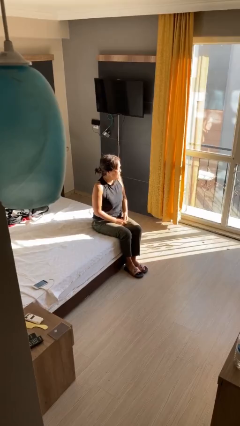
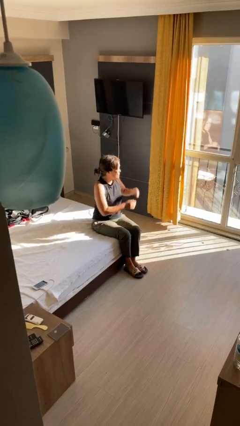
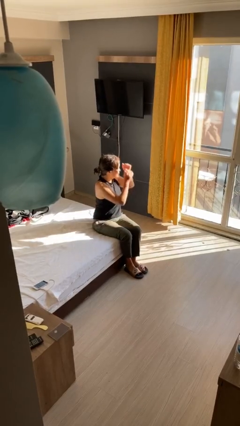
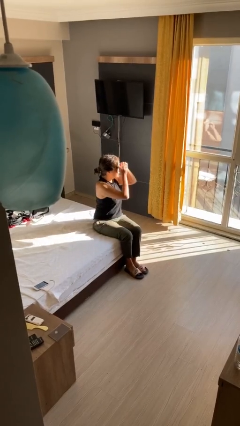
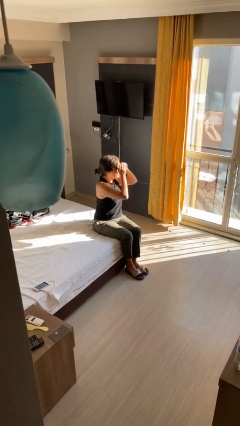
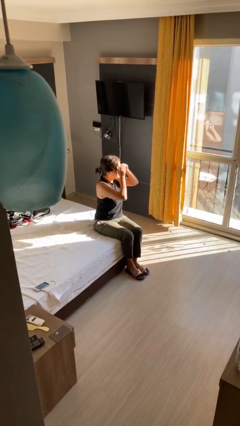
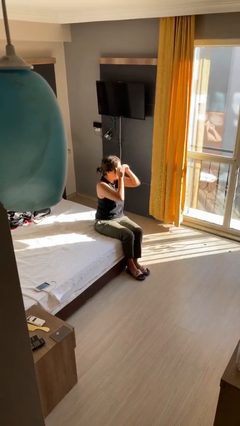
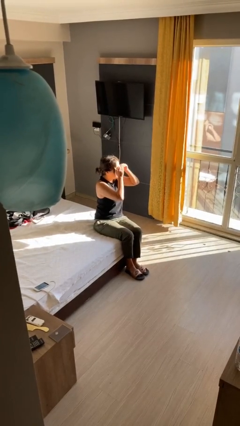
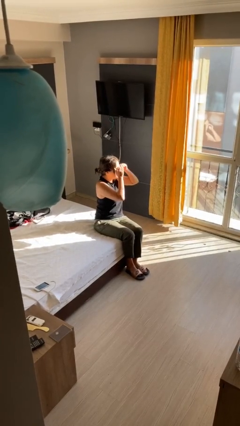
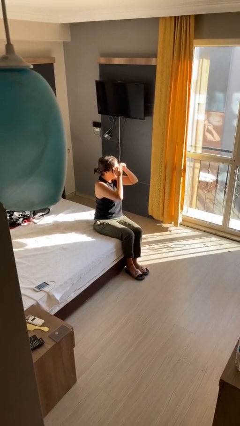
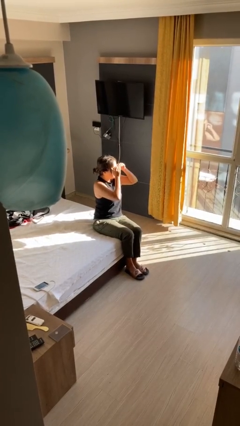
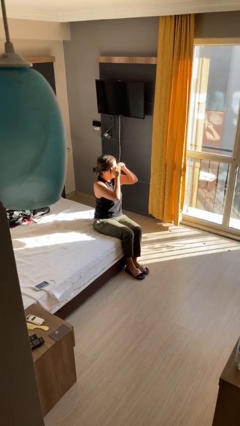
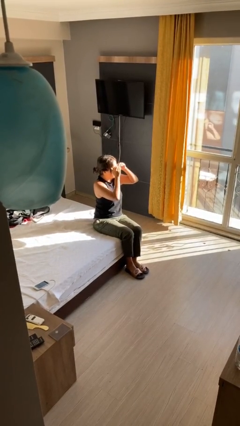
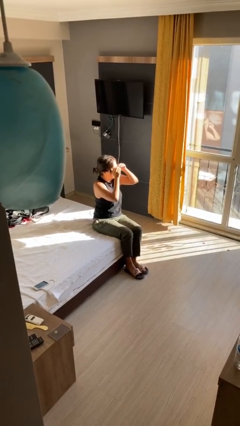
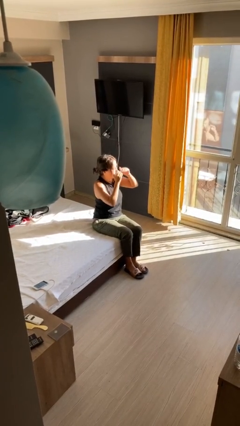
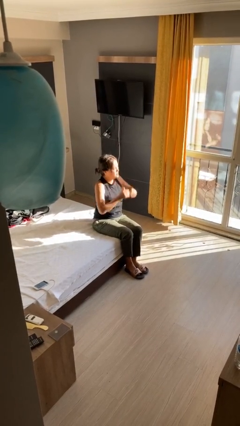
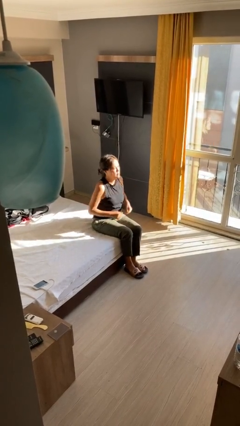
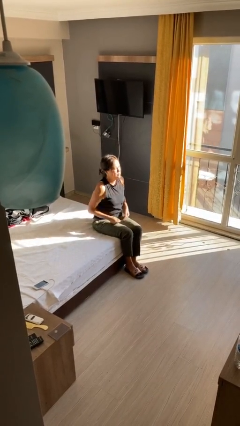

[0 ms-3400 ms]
person shades eyes

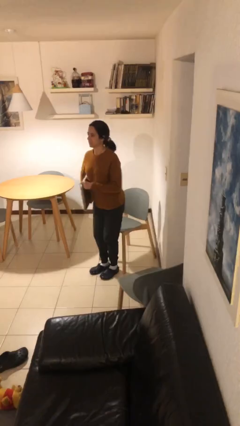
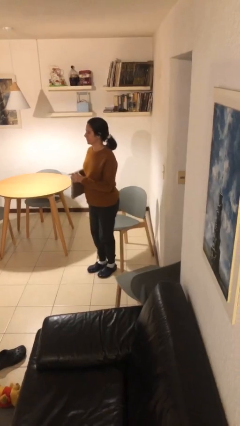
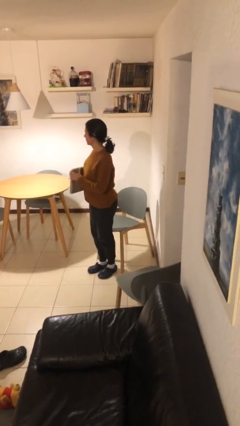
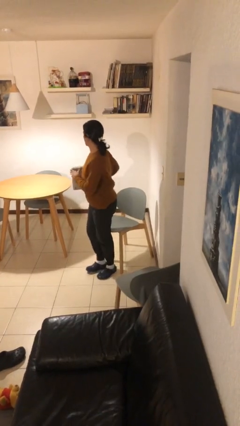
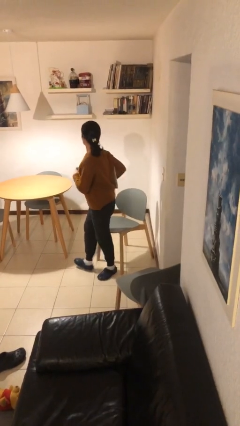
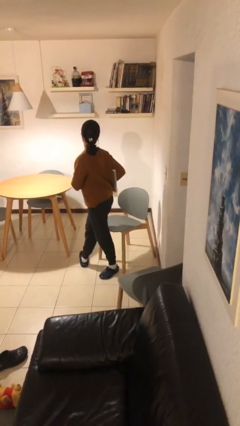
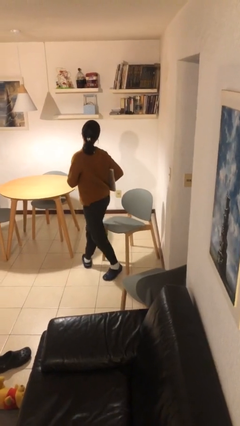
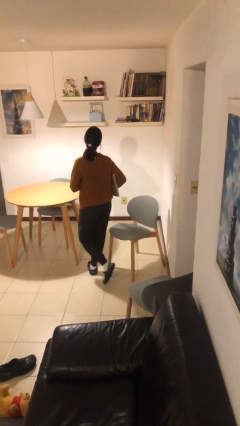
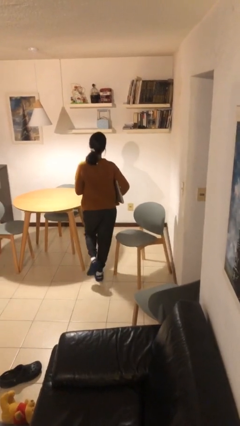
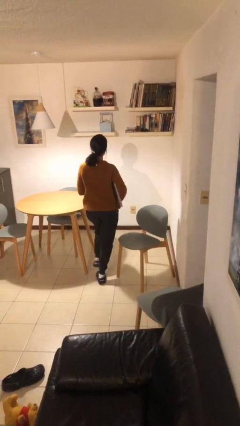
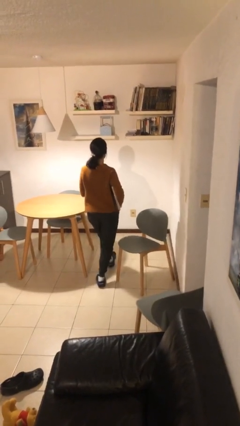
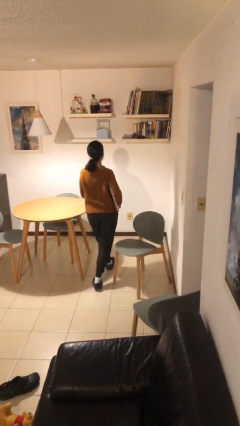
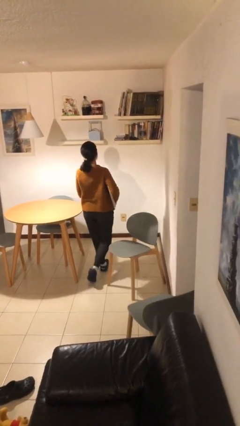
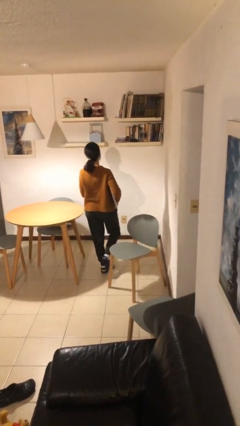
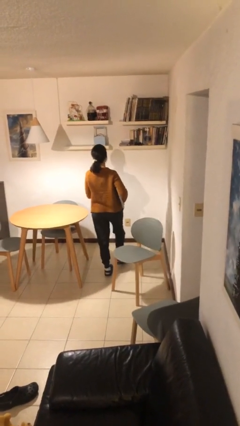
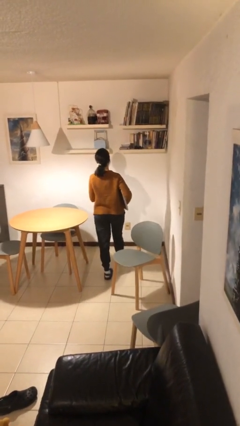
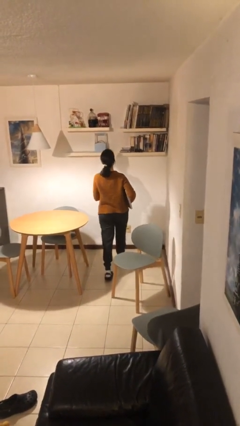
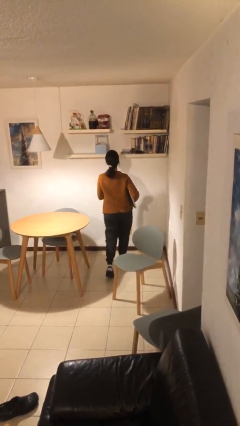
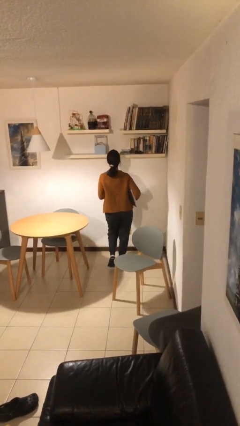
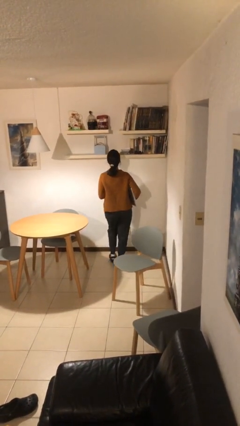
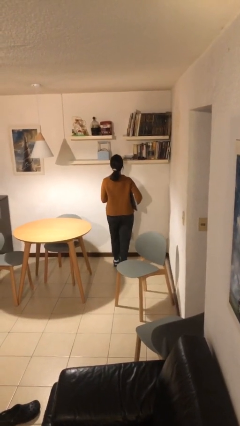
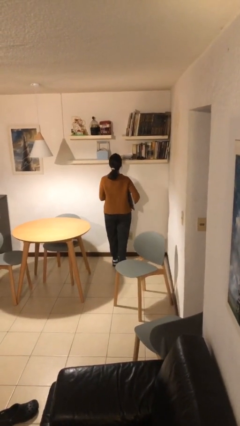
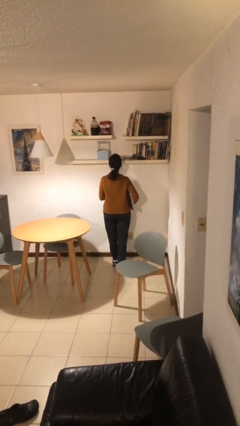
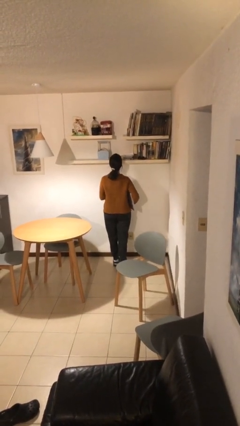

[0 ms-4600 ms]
person stands up

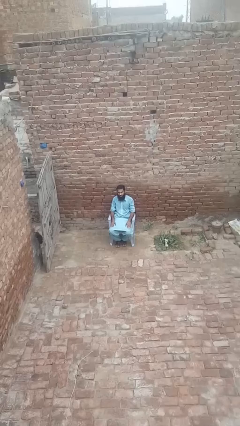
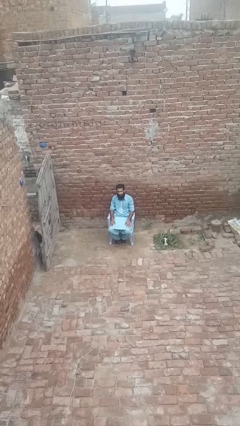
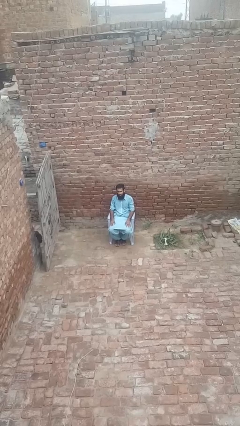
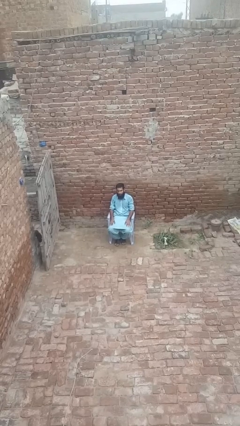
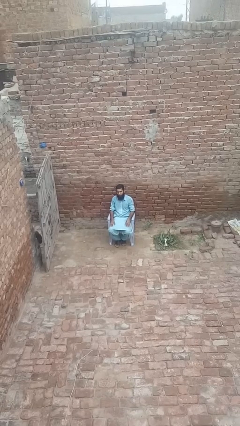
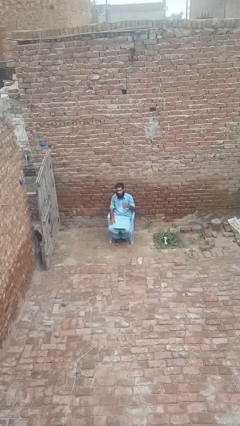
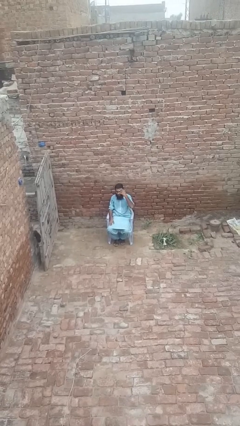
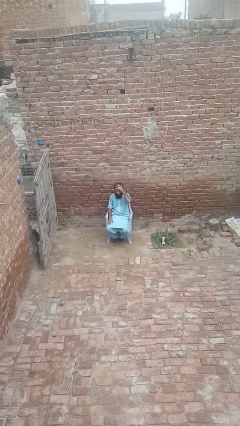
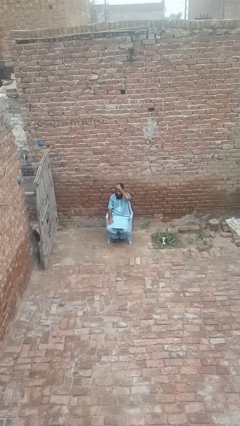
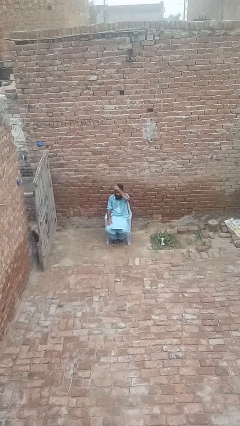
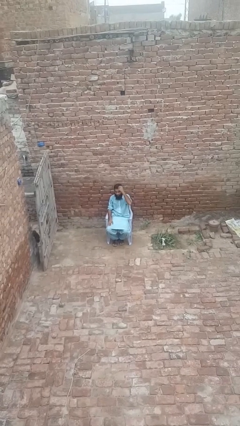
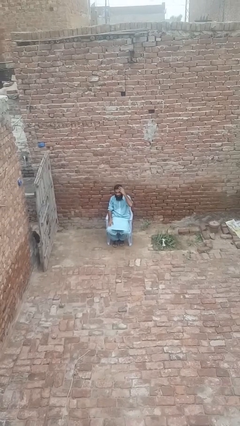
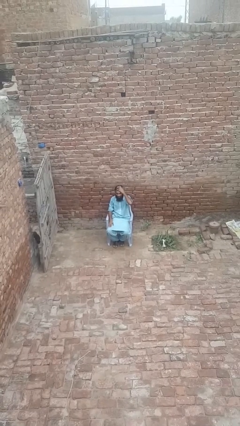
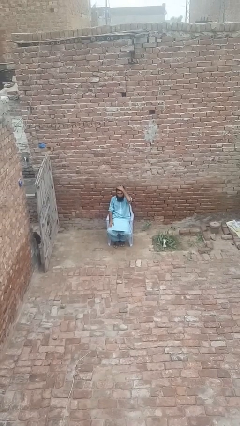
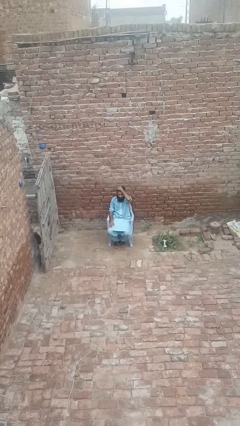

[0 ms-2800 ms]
person strokes hair

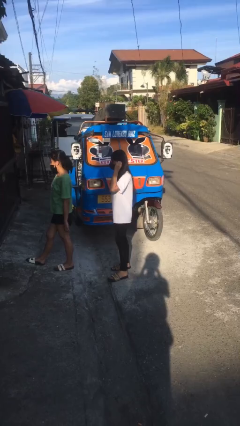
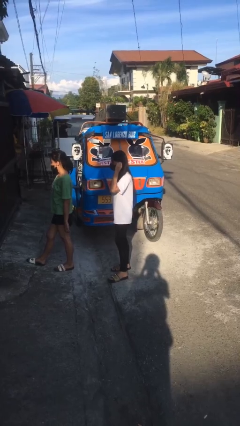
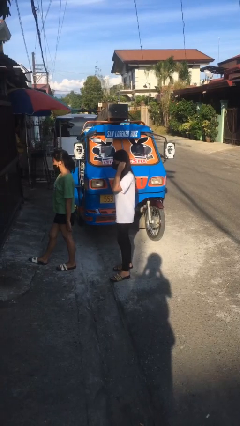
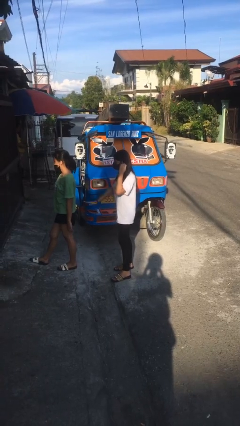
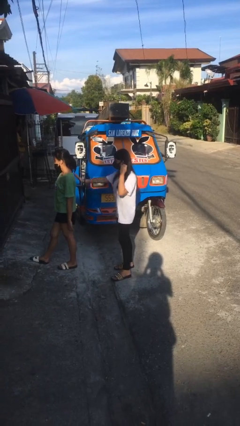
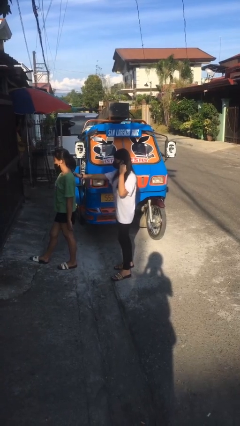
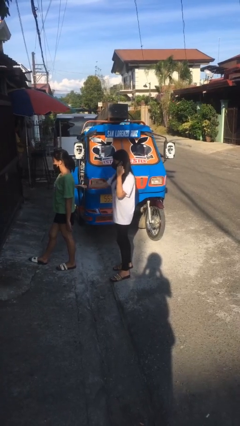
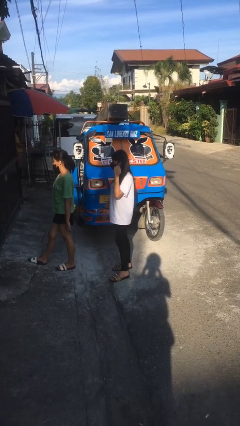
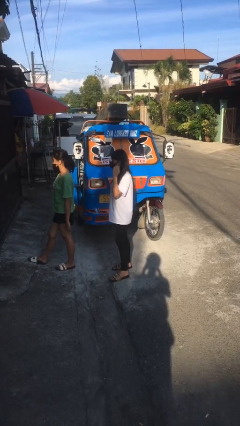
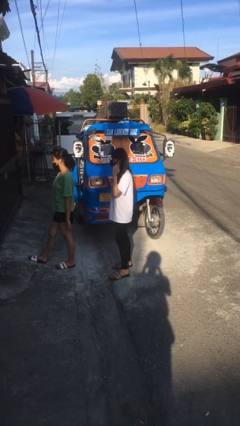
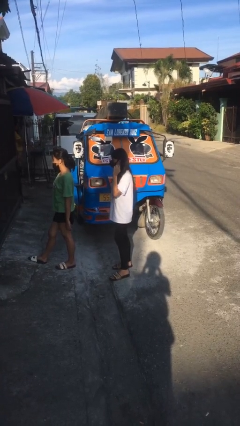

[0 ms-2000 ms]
person touches back of person

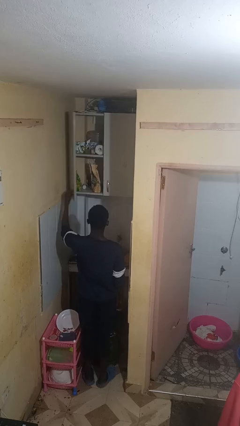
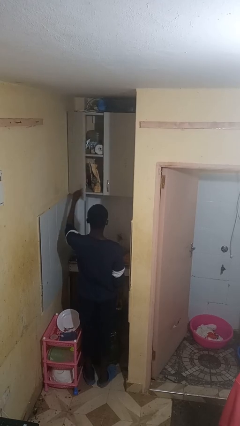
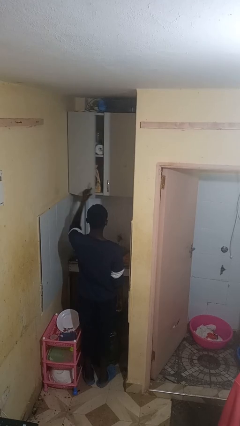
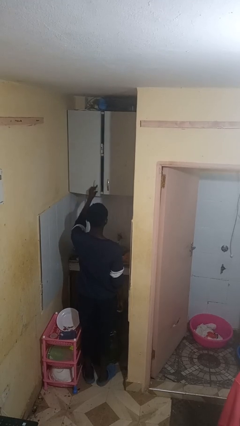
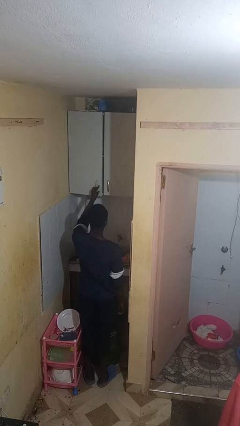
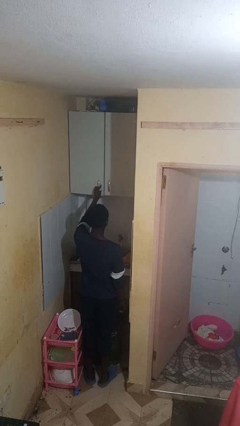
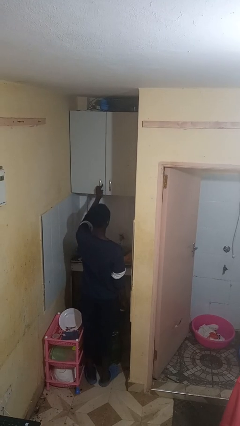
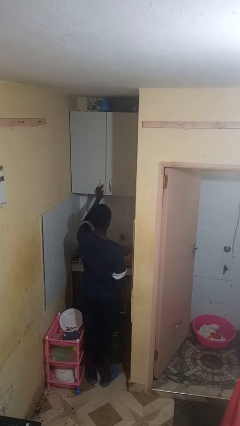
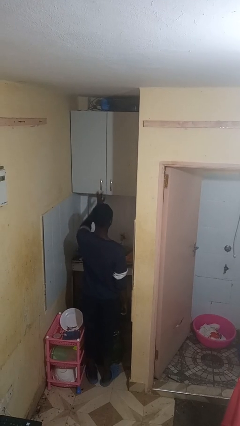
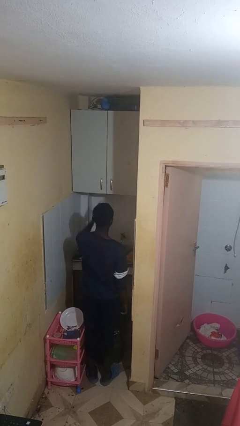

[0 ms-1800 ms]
person closes cabinet

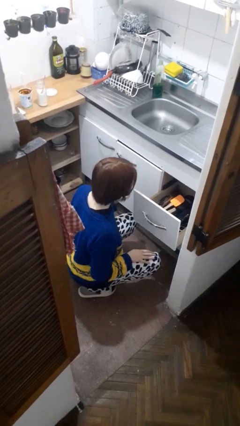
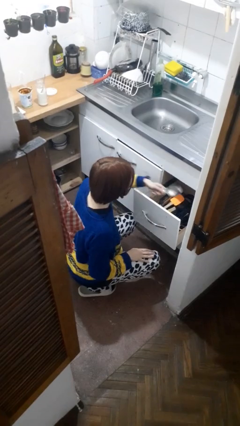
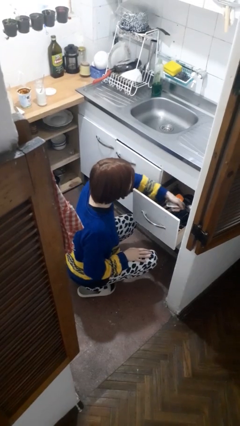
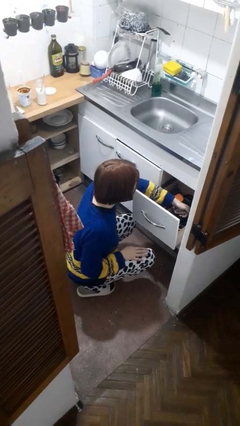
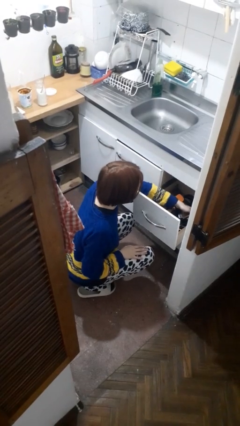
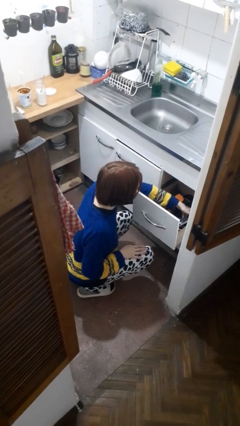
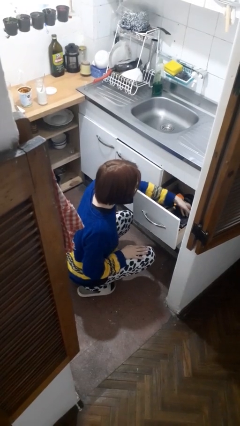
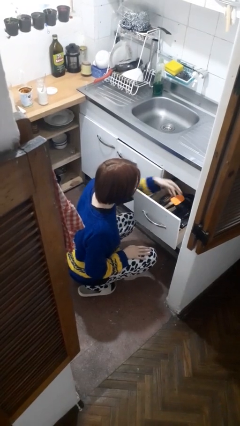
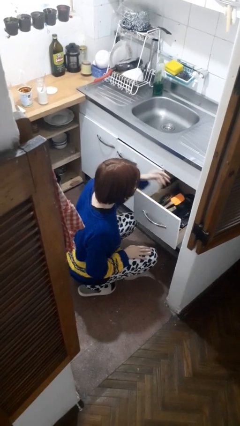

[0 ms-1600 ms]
person puts object into kitchen drawer

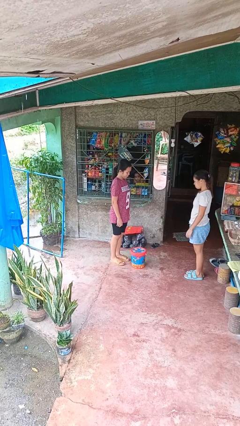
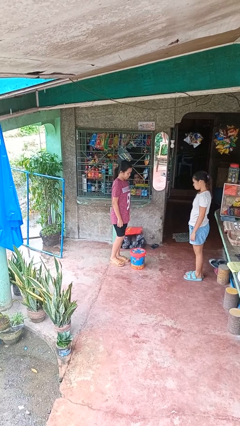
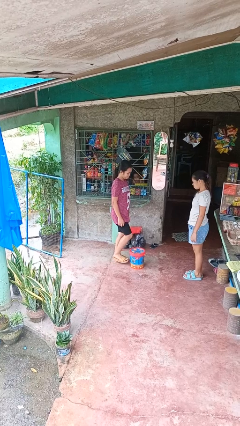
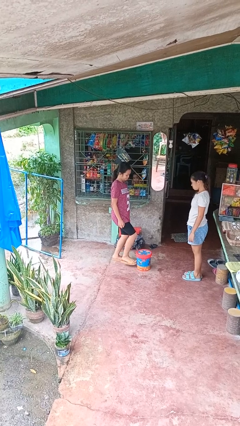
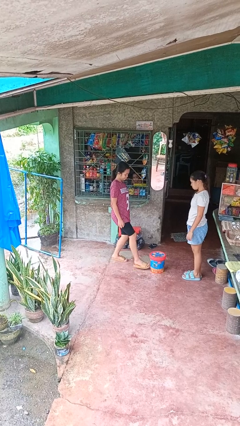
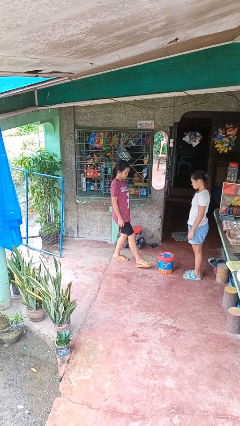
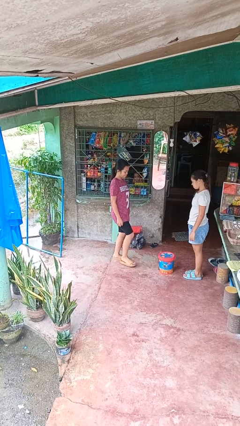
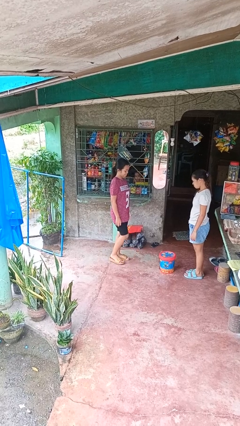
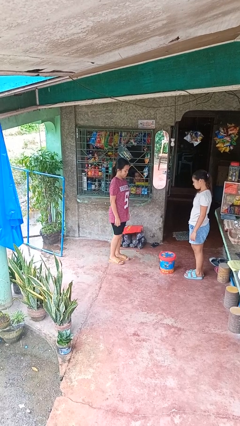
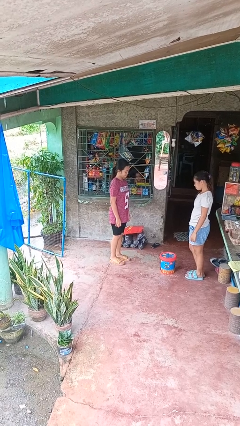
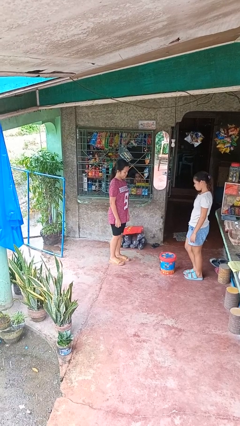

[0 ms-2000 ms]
person kicks object to person
